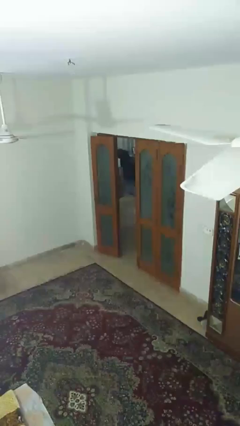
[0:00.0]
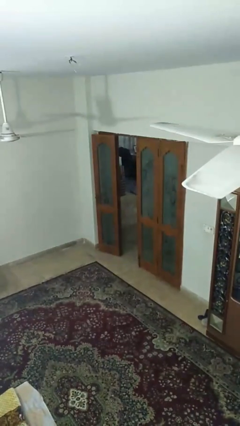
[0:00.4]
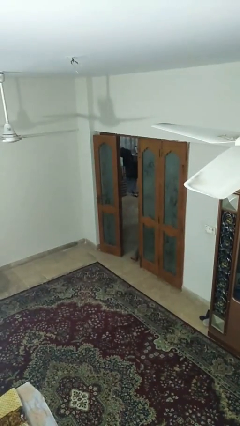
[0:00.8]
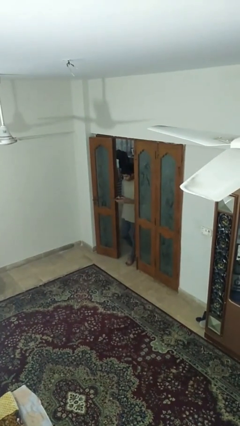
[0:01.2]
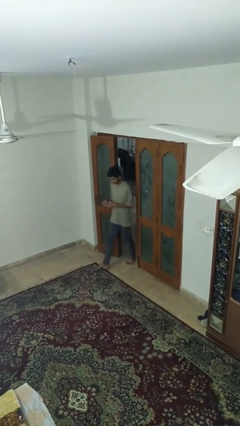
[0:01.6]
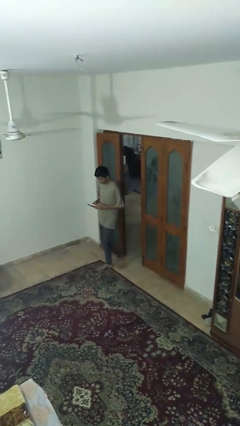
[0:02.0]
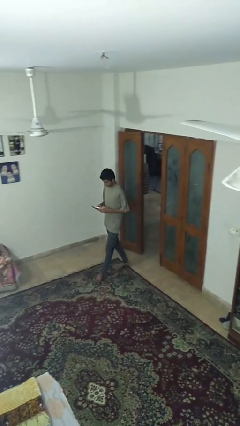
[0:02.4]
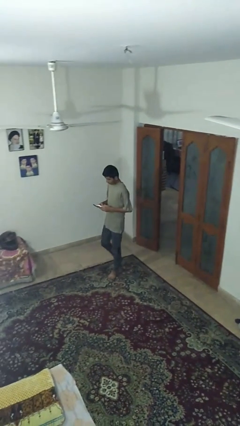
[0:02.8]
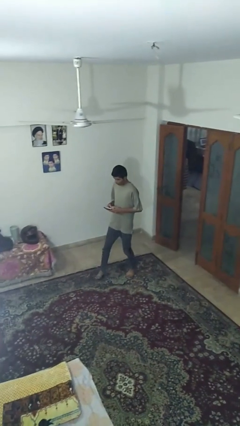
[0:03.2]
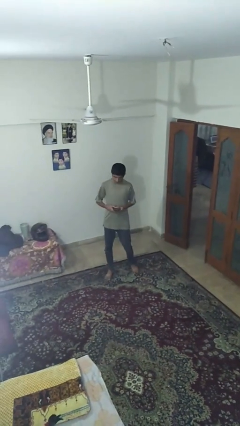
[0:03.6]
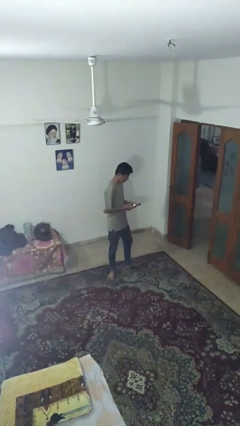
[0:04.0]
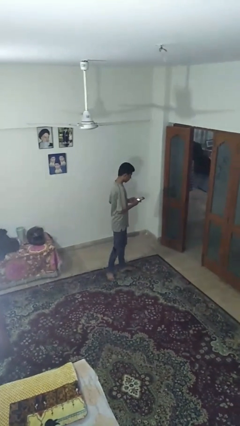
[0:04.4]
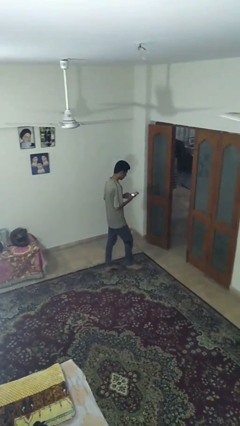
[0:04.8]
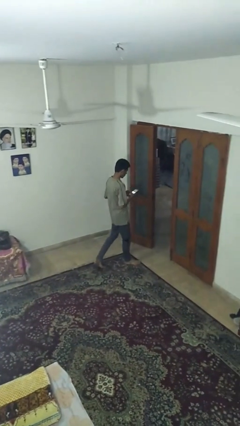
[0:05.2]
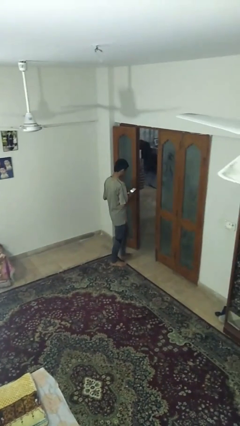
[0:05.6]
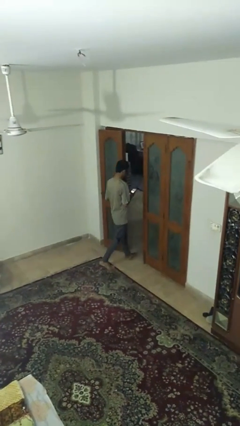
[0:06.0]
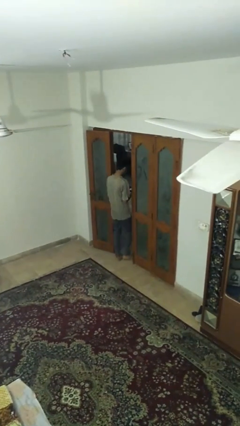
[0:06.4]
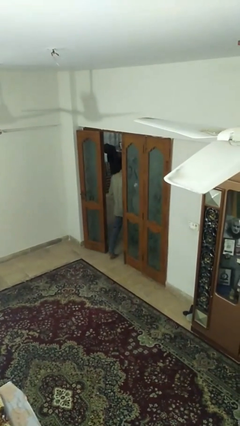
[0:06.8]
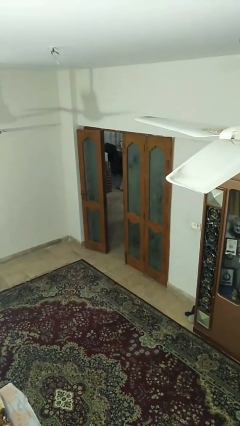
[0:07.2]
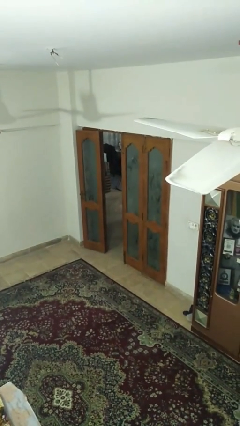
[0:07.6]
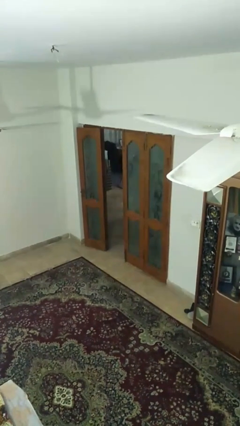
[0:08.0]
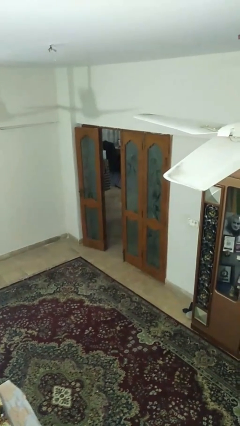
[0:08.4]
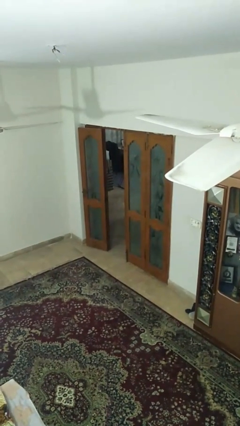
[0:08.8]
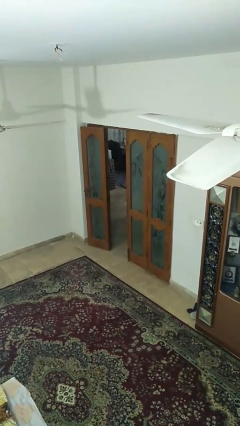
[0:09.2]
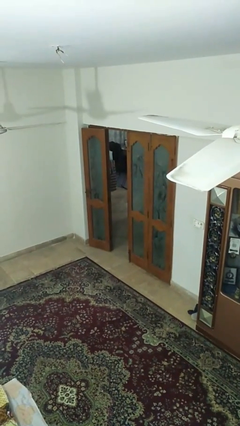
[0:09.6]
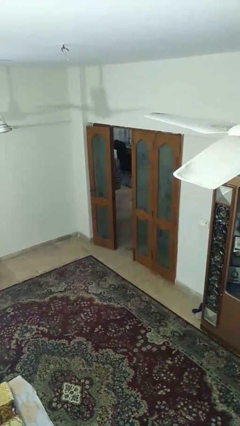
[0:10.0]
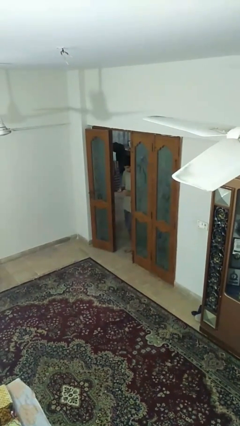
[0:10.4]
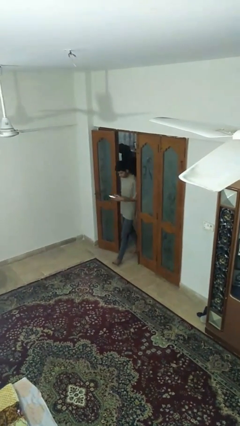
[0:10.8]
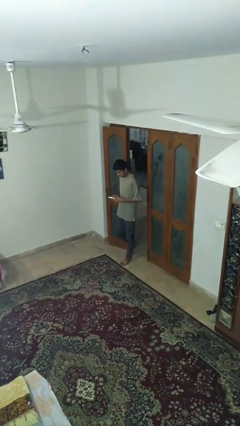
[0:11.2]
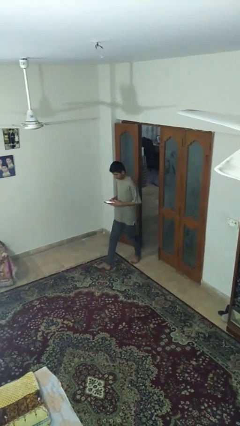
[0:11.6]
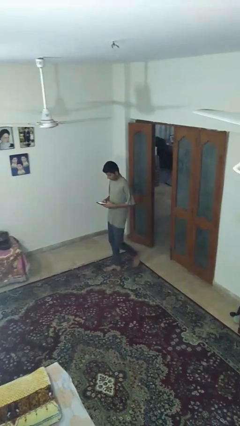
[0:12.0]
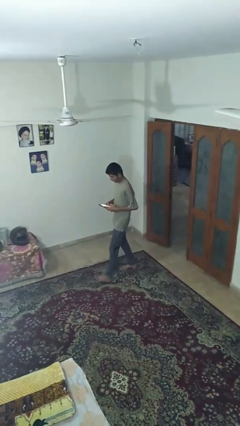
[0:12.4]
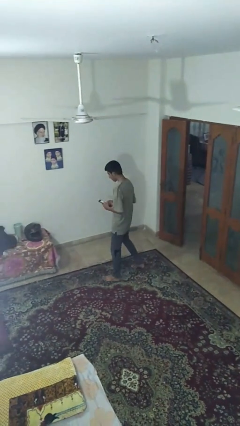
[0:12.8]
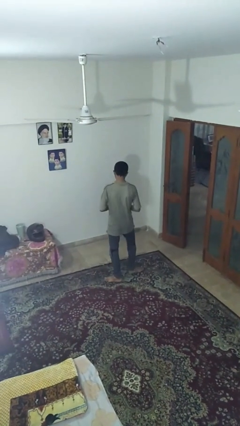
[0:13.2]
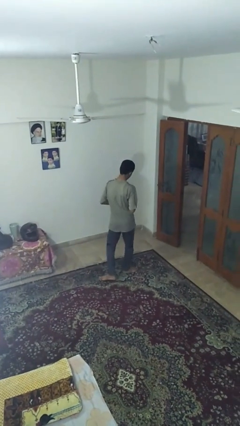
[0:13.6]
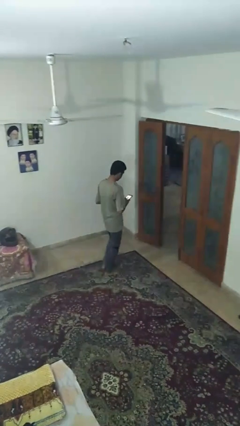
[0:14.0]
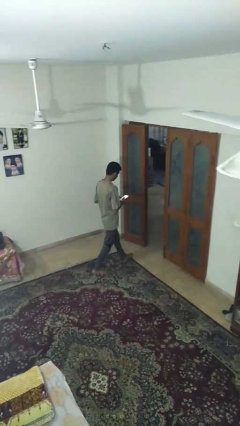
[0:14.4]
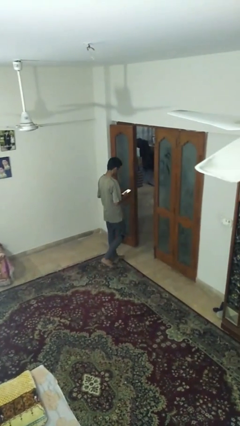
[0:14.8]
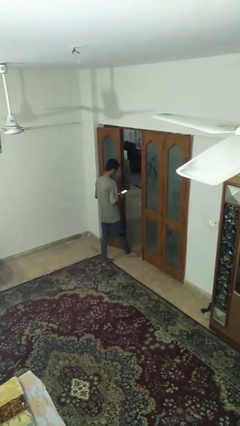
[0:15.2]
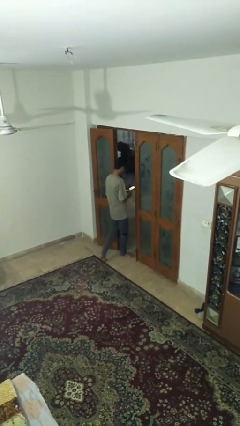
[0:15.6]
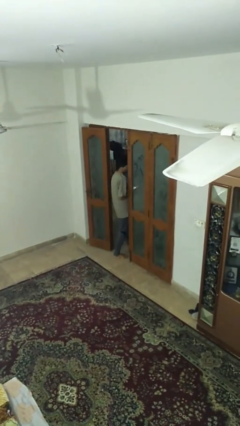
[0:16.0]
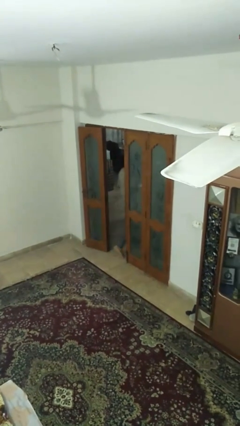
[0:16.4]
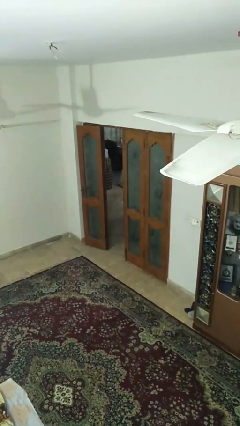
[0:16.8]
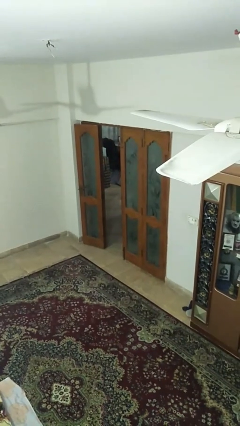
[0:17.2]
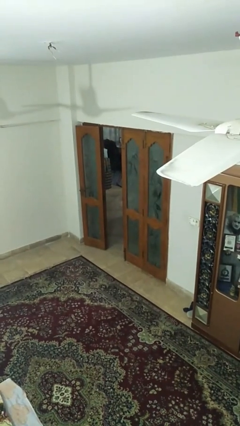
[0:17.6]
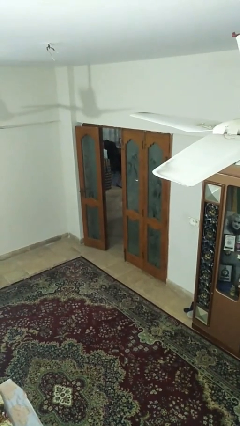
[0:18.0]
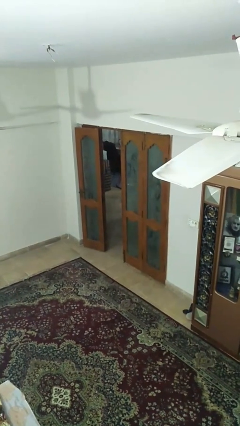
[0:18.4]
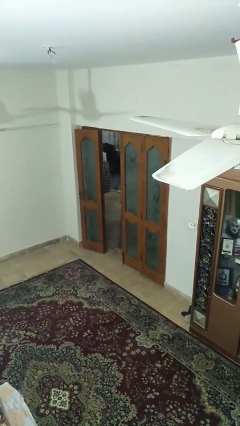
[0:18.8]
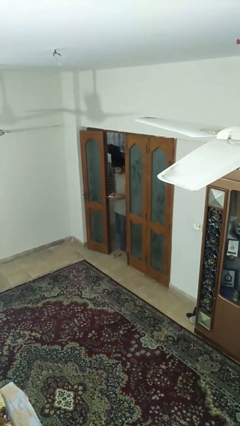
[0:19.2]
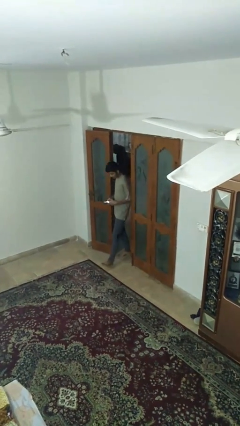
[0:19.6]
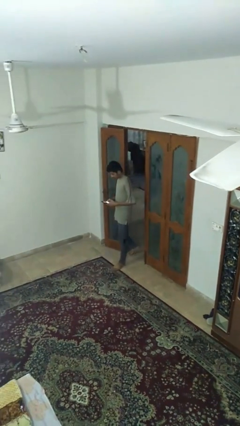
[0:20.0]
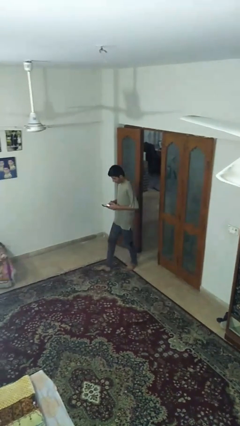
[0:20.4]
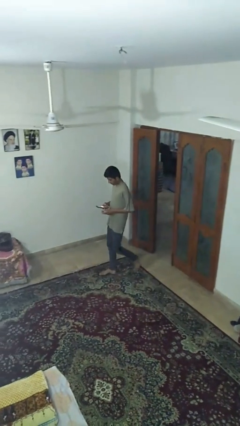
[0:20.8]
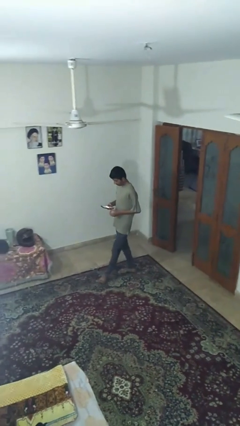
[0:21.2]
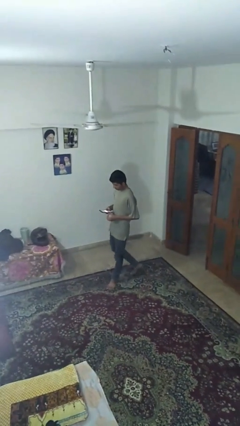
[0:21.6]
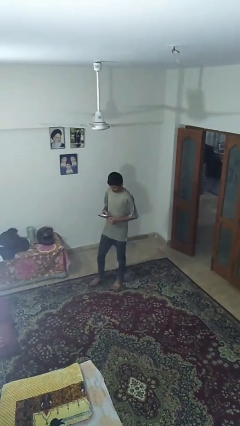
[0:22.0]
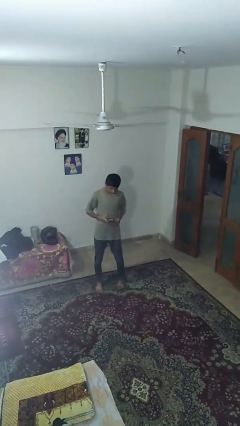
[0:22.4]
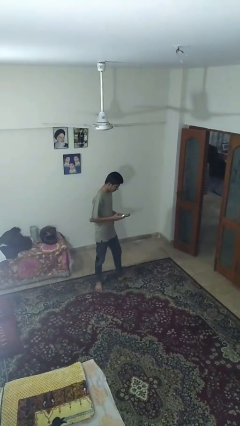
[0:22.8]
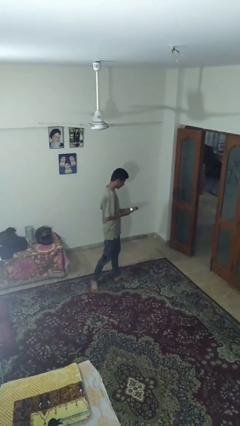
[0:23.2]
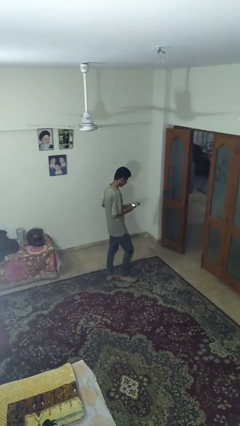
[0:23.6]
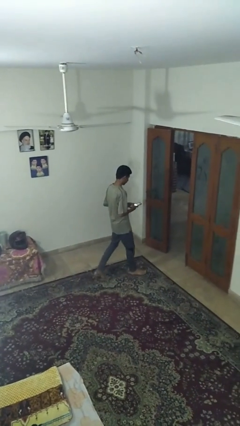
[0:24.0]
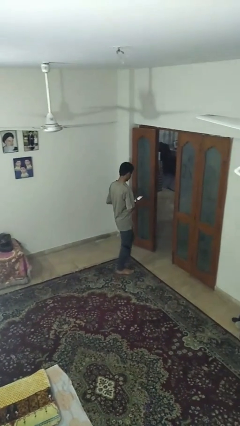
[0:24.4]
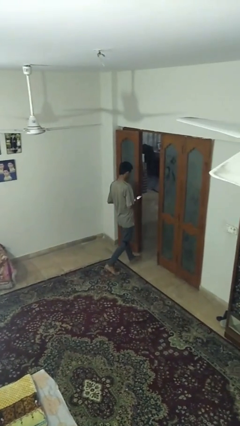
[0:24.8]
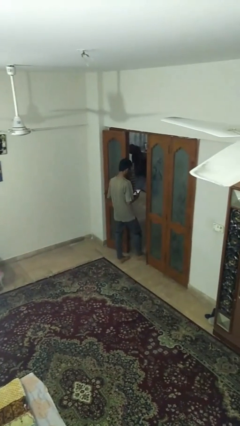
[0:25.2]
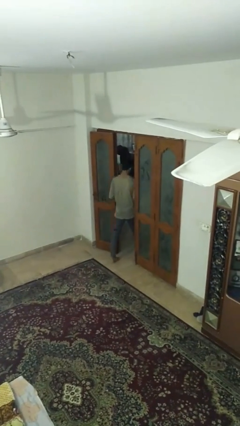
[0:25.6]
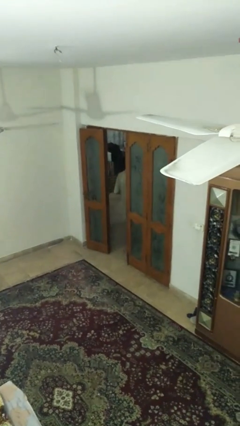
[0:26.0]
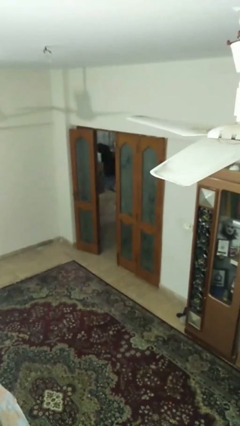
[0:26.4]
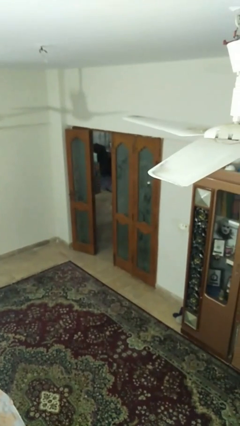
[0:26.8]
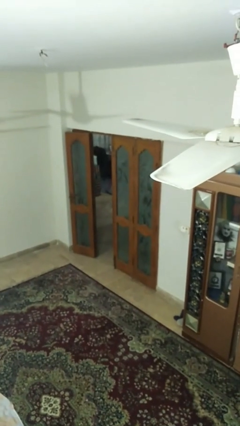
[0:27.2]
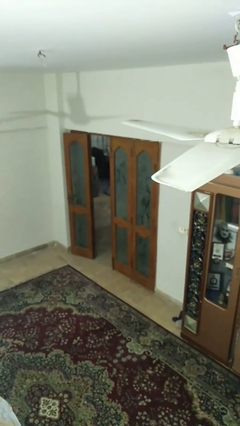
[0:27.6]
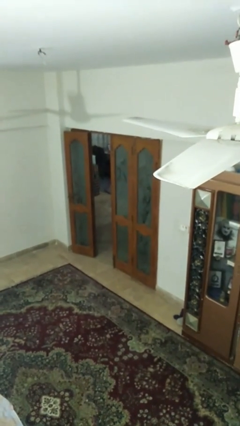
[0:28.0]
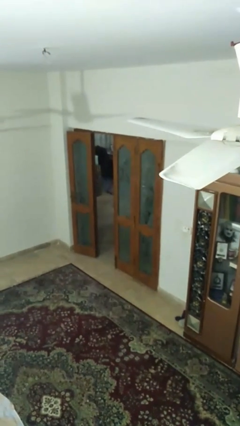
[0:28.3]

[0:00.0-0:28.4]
person texts on phone

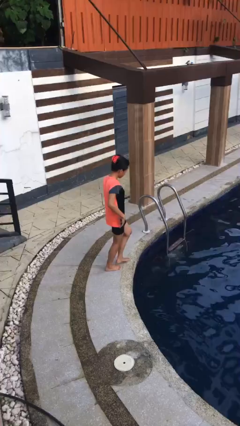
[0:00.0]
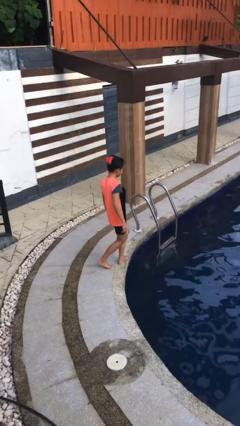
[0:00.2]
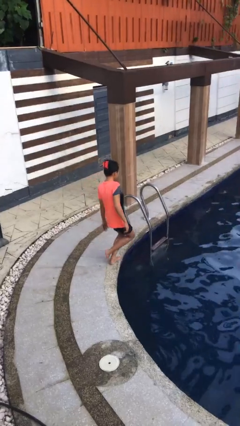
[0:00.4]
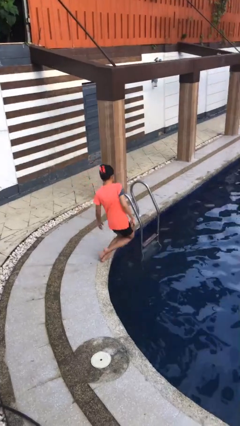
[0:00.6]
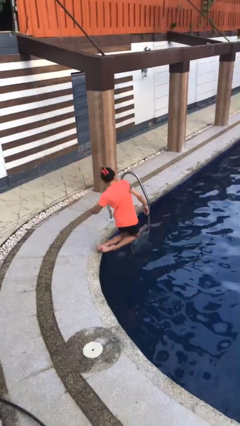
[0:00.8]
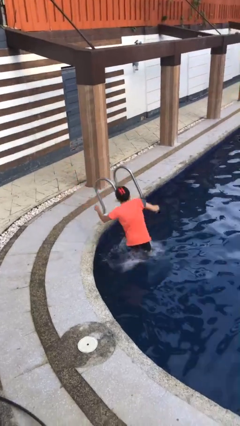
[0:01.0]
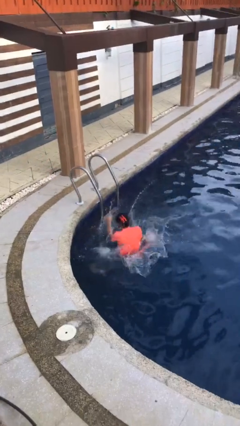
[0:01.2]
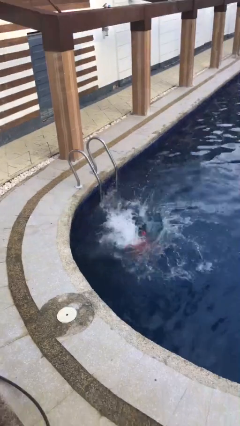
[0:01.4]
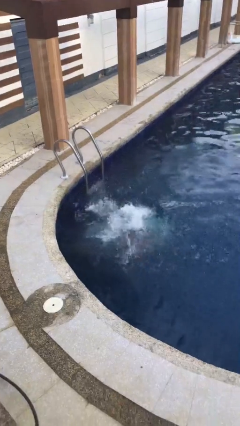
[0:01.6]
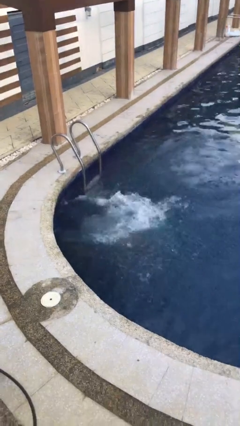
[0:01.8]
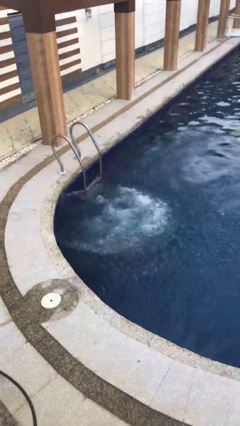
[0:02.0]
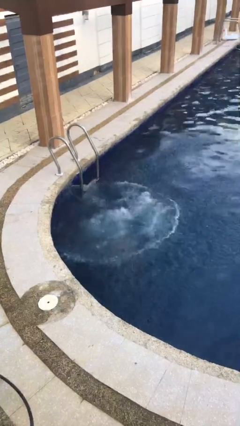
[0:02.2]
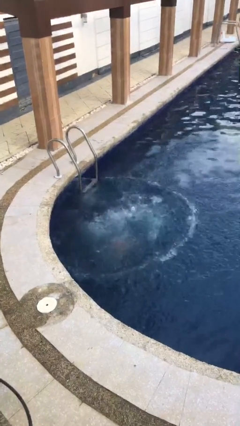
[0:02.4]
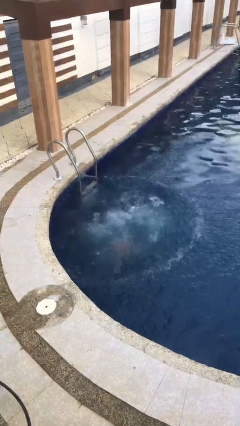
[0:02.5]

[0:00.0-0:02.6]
person falls into pool

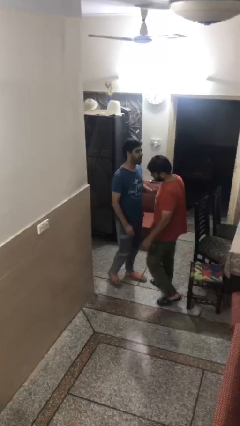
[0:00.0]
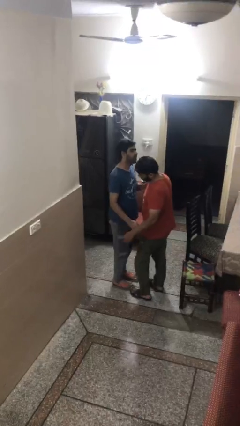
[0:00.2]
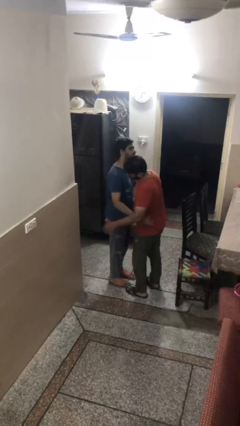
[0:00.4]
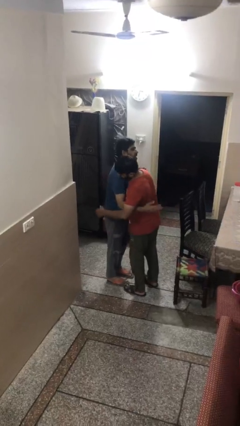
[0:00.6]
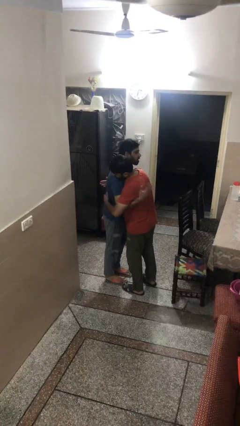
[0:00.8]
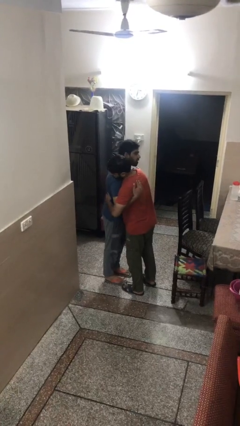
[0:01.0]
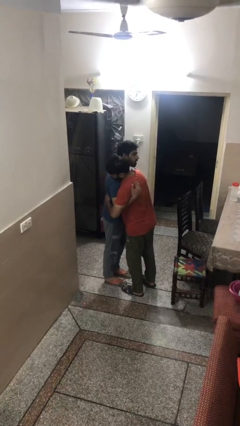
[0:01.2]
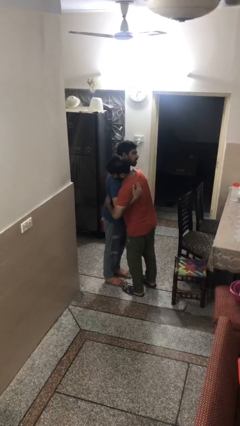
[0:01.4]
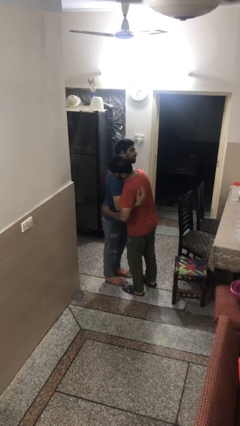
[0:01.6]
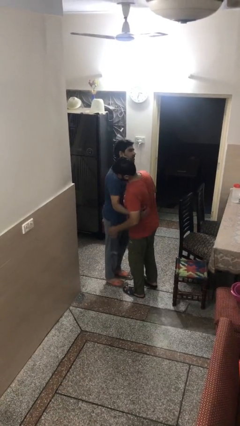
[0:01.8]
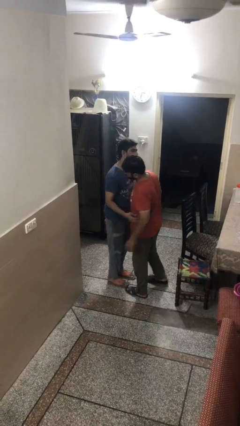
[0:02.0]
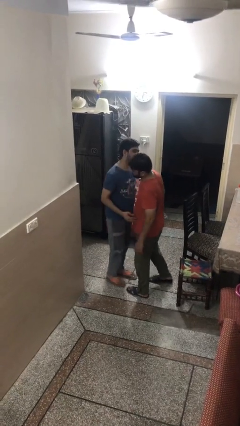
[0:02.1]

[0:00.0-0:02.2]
person embraces person
